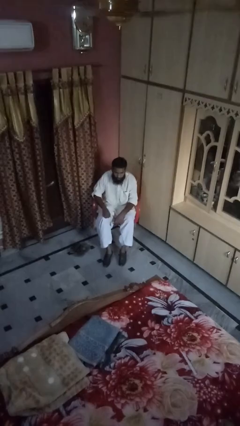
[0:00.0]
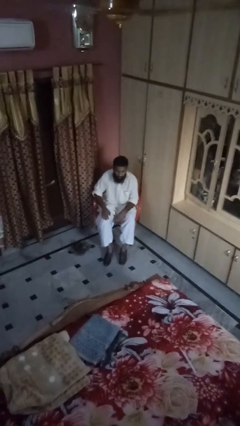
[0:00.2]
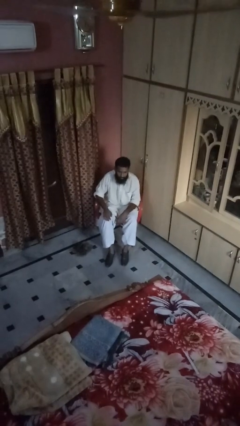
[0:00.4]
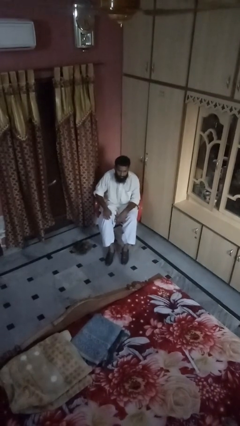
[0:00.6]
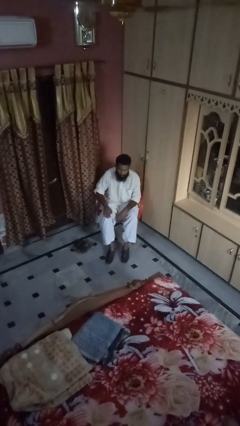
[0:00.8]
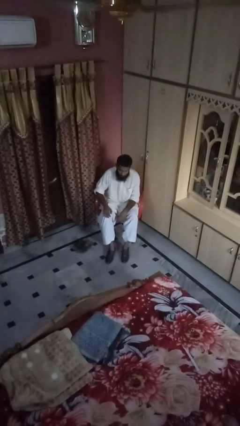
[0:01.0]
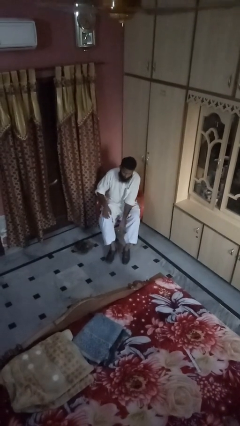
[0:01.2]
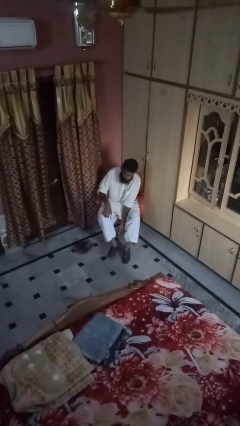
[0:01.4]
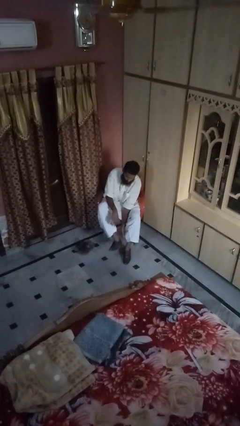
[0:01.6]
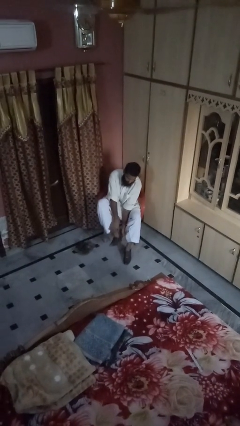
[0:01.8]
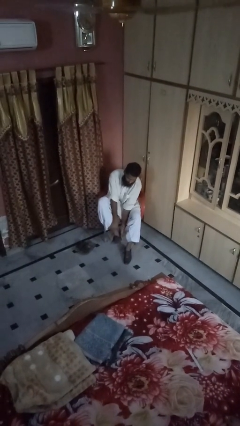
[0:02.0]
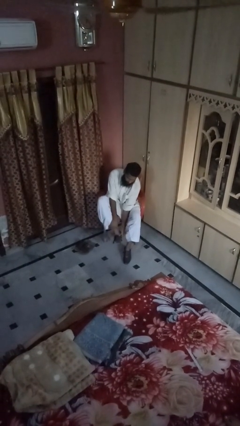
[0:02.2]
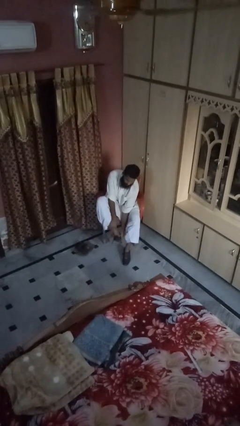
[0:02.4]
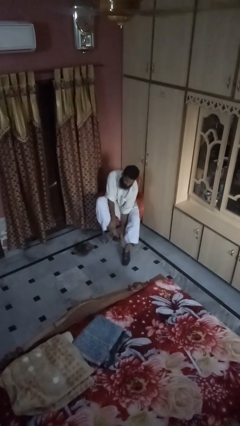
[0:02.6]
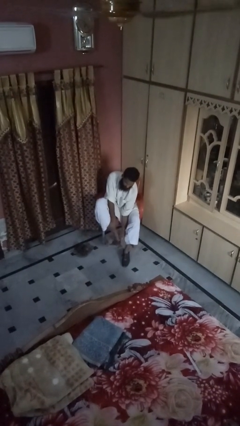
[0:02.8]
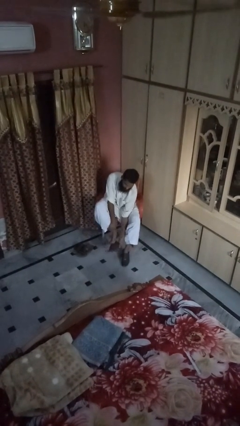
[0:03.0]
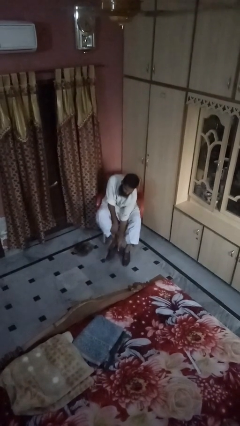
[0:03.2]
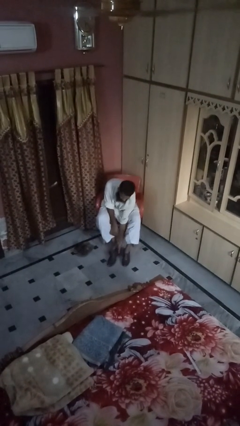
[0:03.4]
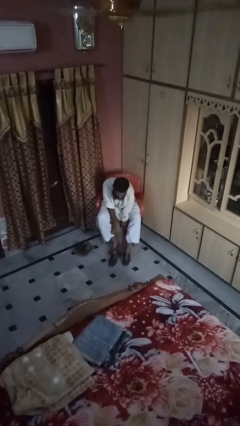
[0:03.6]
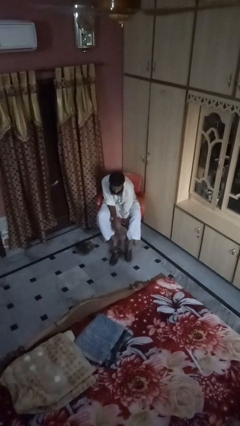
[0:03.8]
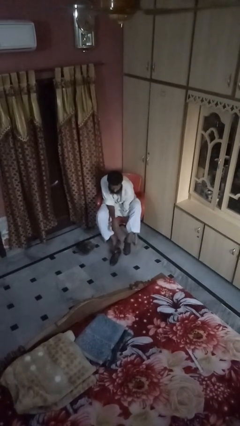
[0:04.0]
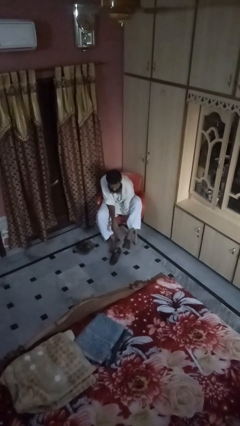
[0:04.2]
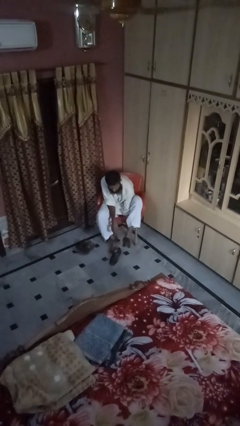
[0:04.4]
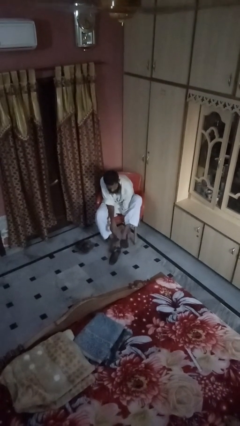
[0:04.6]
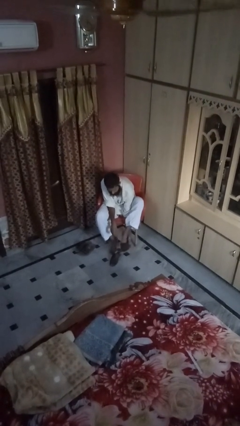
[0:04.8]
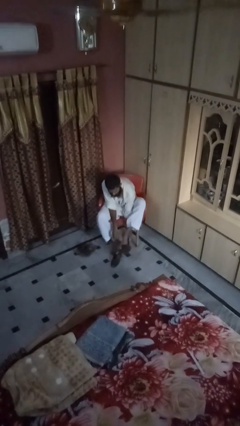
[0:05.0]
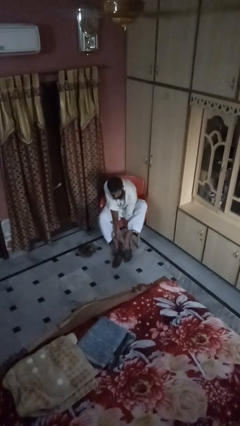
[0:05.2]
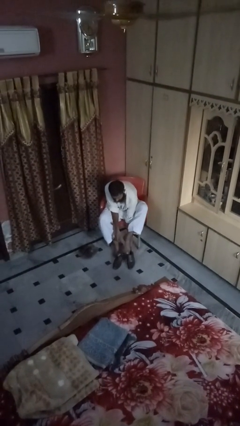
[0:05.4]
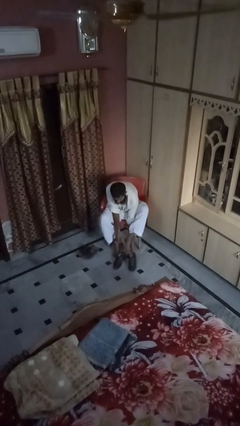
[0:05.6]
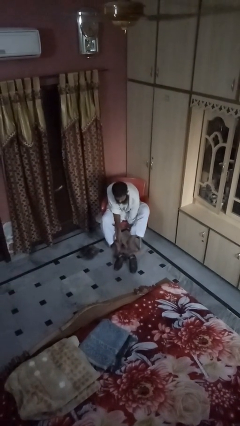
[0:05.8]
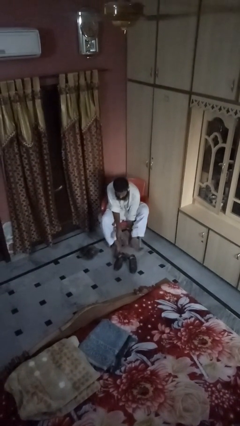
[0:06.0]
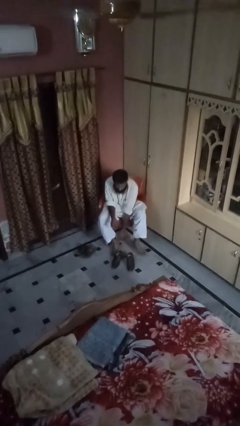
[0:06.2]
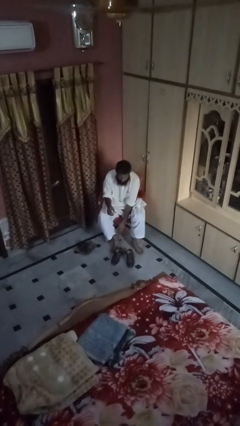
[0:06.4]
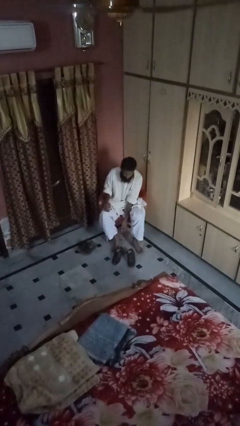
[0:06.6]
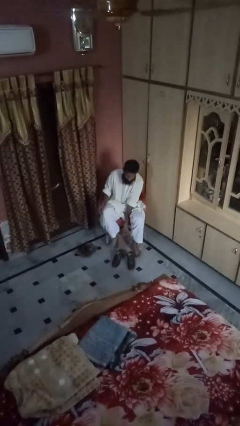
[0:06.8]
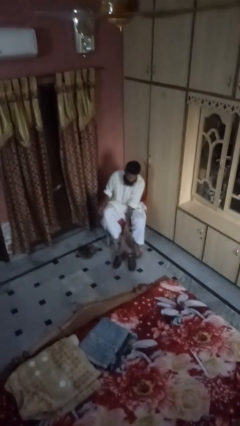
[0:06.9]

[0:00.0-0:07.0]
person takes off boots

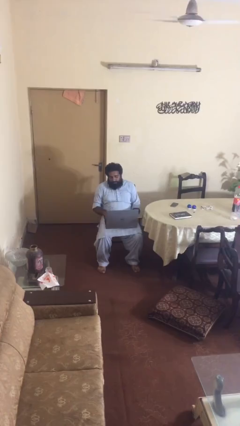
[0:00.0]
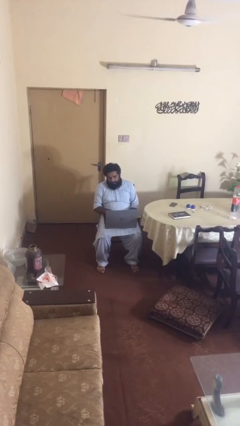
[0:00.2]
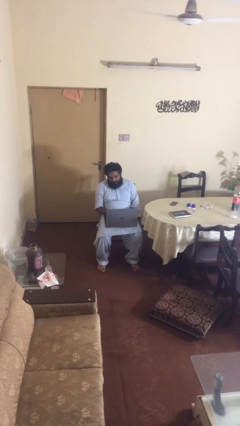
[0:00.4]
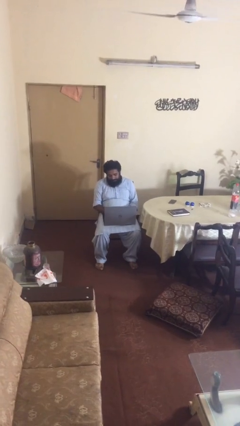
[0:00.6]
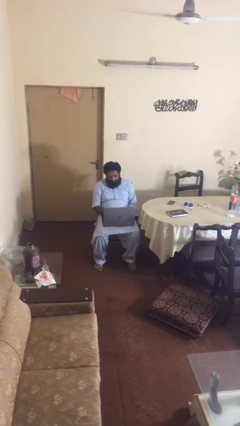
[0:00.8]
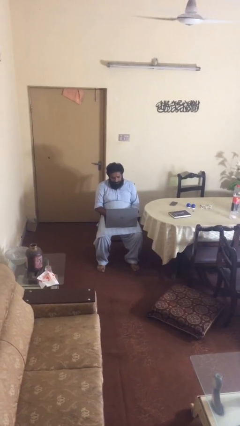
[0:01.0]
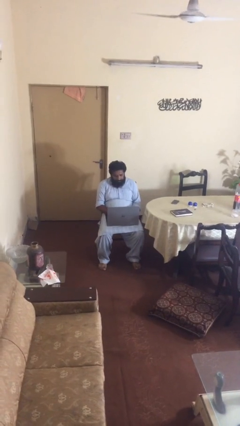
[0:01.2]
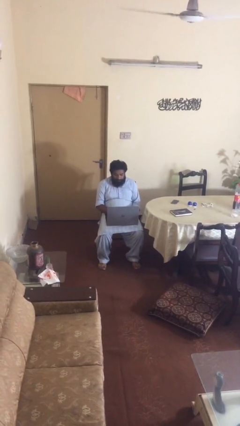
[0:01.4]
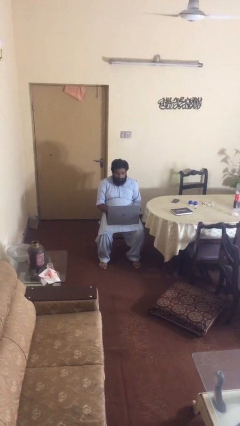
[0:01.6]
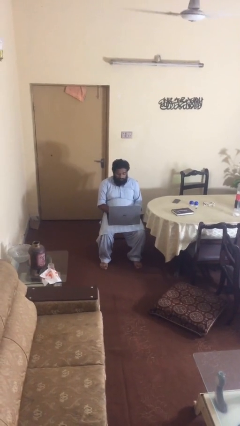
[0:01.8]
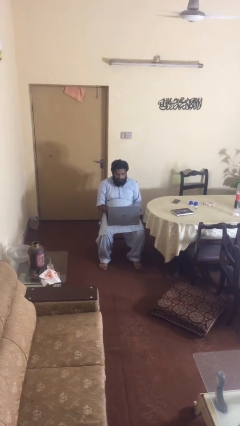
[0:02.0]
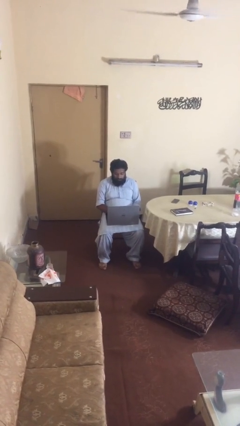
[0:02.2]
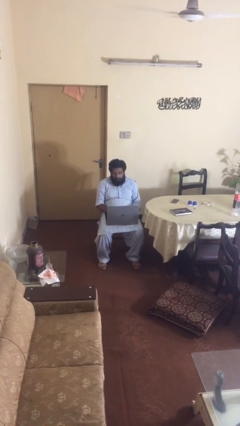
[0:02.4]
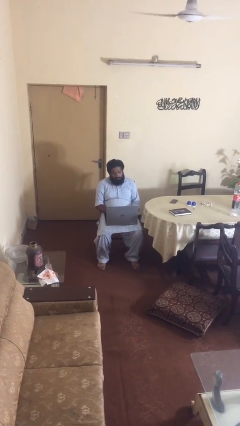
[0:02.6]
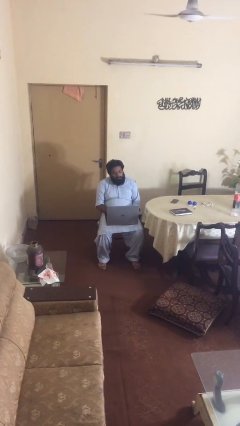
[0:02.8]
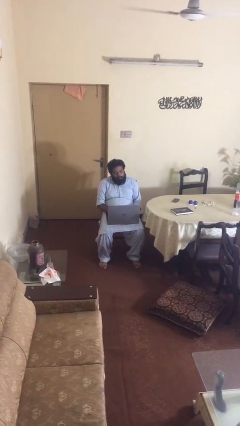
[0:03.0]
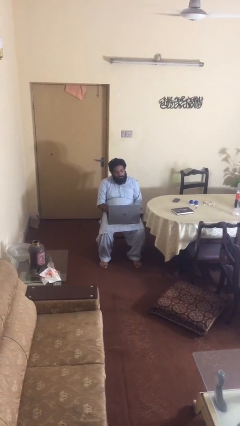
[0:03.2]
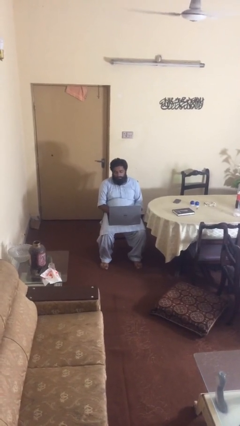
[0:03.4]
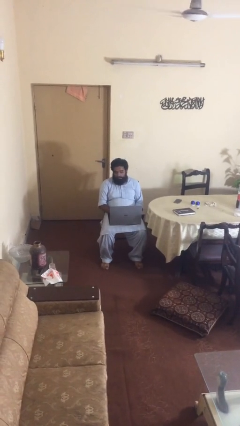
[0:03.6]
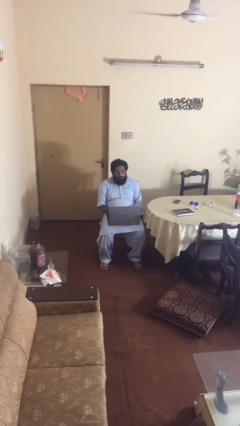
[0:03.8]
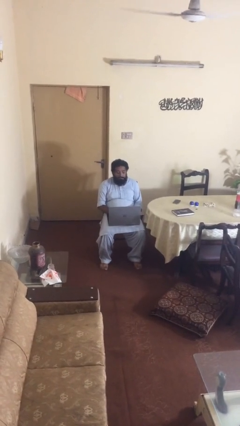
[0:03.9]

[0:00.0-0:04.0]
person interacts with laptop

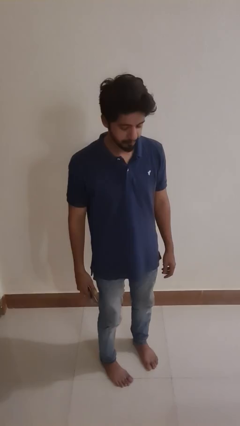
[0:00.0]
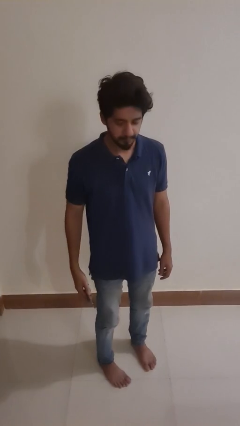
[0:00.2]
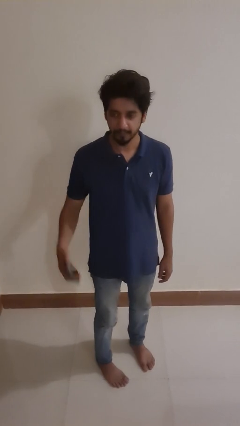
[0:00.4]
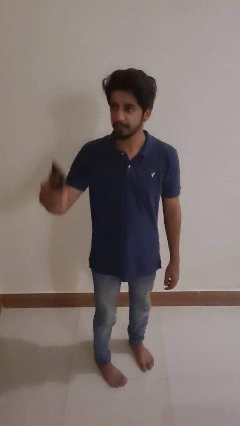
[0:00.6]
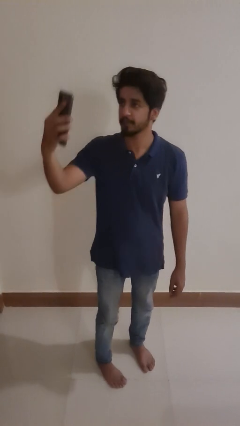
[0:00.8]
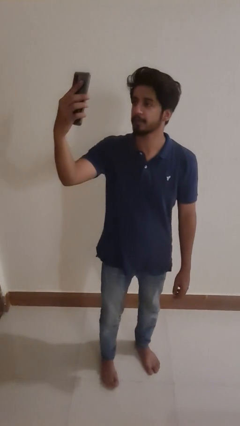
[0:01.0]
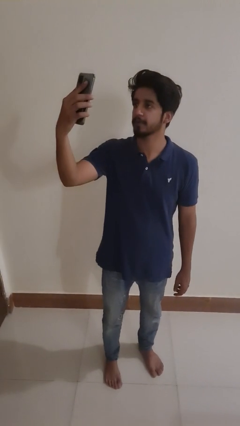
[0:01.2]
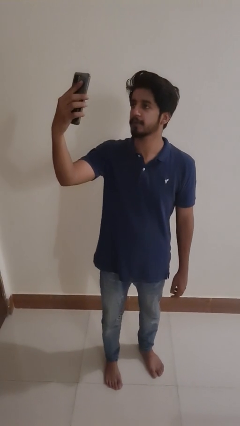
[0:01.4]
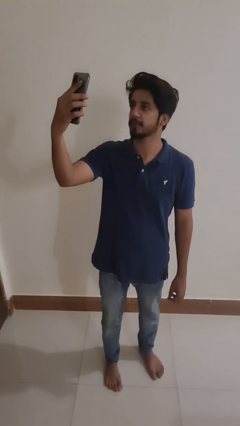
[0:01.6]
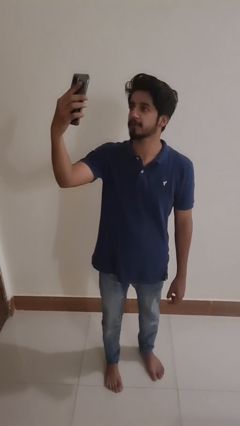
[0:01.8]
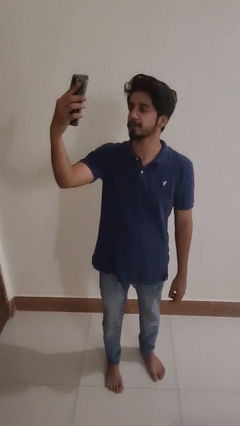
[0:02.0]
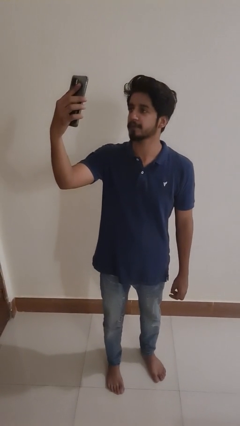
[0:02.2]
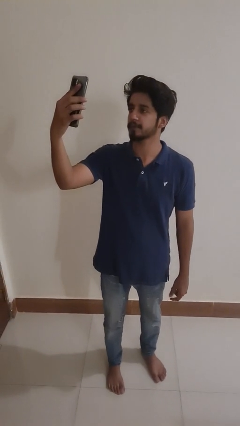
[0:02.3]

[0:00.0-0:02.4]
person takes selfie

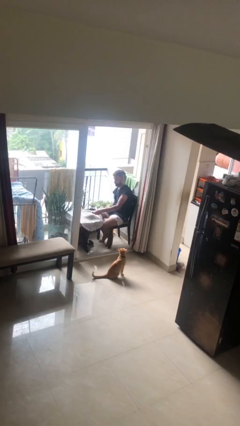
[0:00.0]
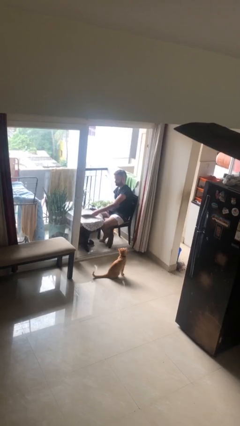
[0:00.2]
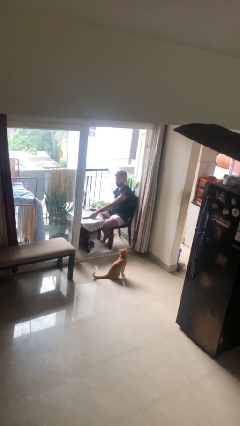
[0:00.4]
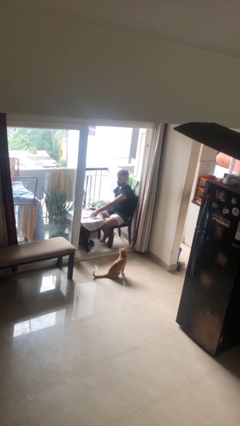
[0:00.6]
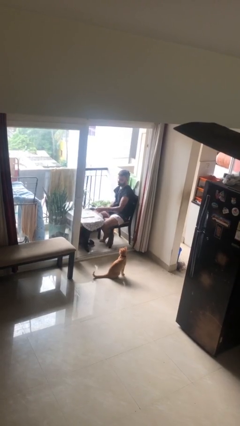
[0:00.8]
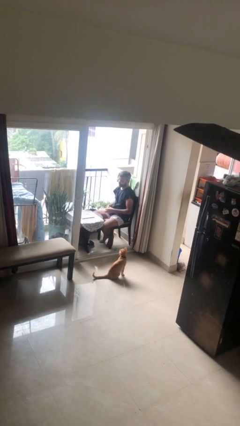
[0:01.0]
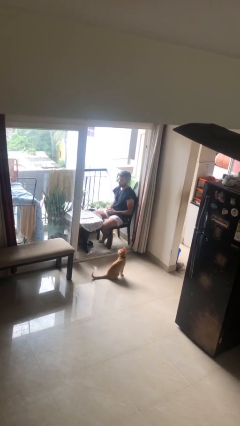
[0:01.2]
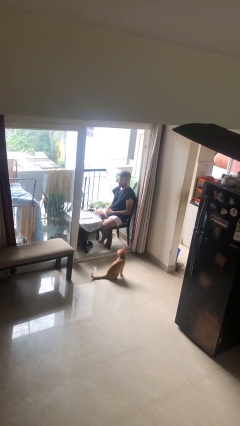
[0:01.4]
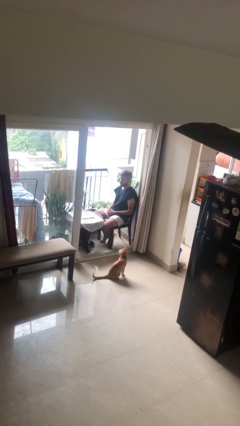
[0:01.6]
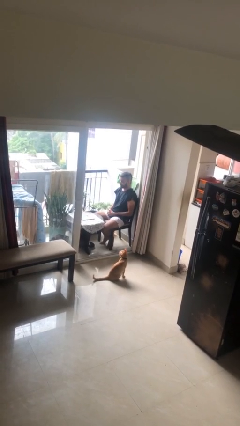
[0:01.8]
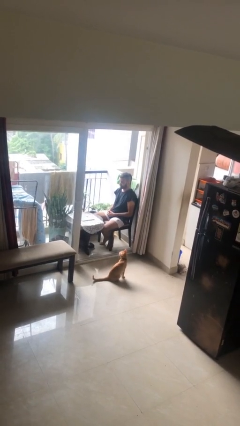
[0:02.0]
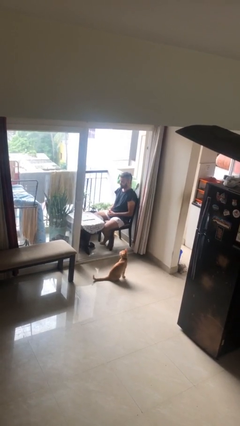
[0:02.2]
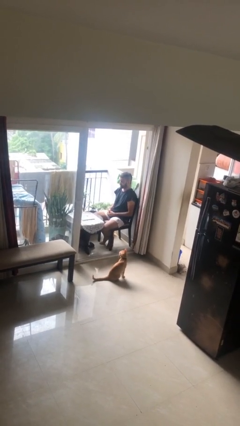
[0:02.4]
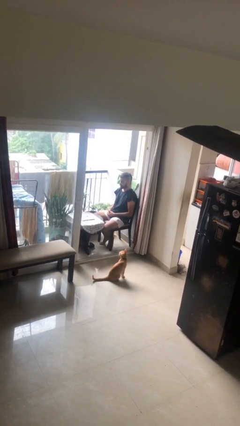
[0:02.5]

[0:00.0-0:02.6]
person puts down object on table

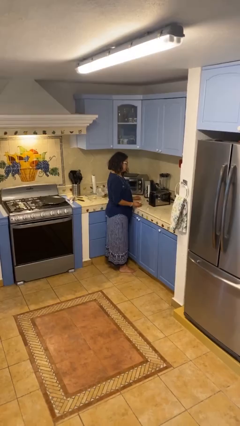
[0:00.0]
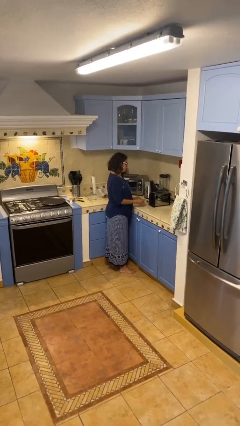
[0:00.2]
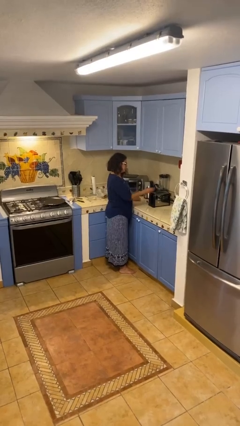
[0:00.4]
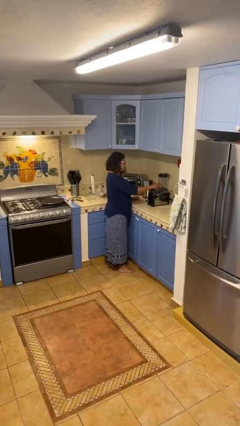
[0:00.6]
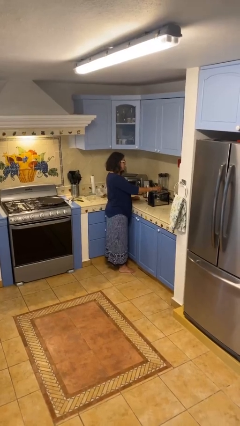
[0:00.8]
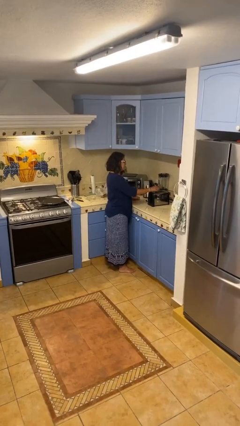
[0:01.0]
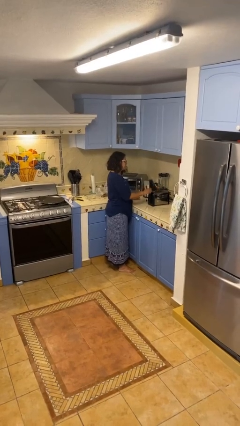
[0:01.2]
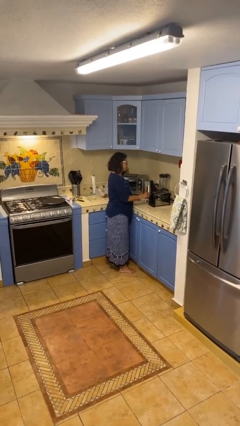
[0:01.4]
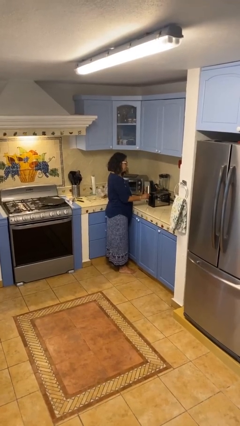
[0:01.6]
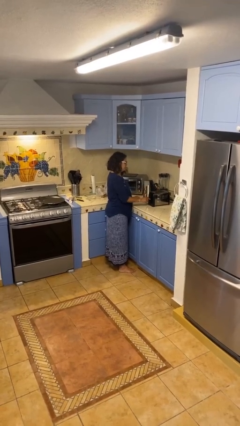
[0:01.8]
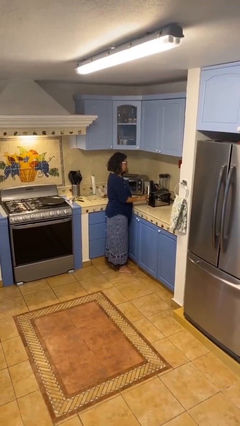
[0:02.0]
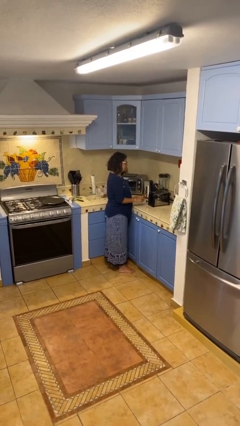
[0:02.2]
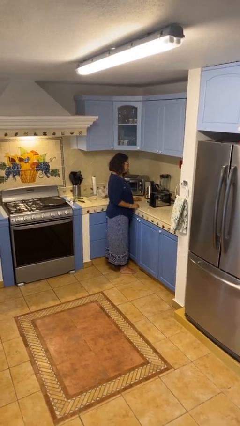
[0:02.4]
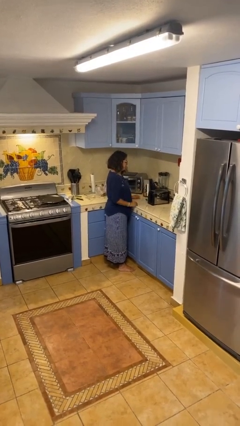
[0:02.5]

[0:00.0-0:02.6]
person puts object into toaster
